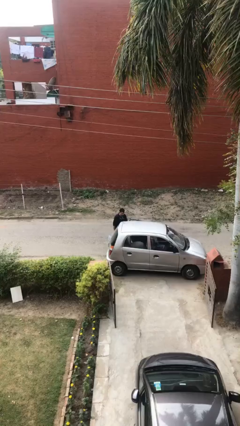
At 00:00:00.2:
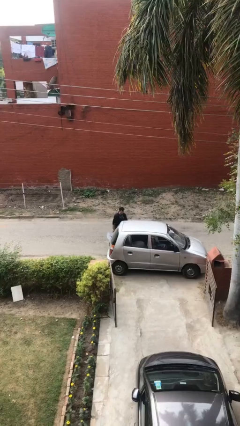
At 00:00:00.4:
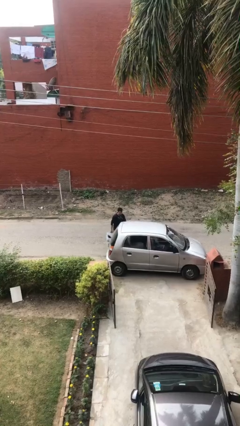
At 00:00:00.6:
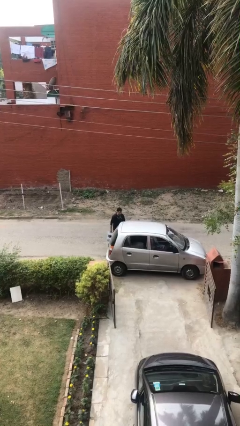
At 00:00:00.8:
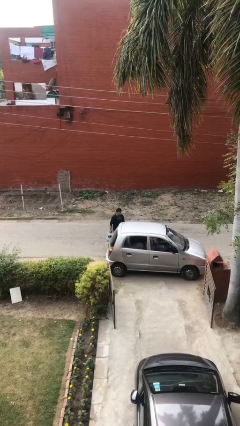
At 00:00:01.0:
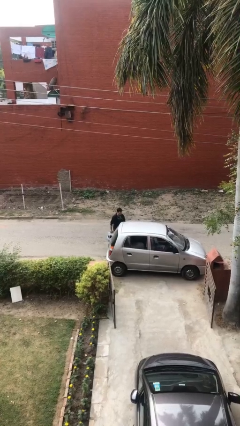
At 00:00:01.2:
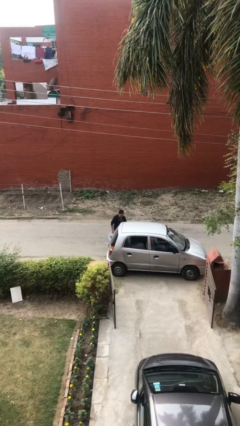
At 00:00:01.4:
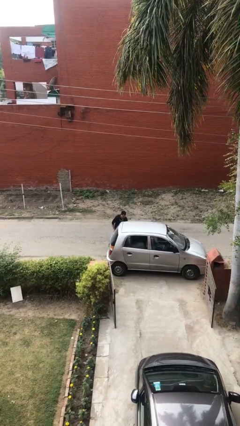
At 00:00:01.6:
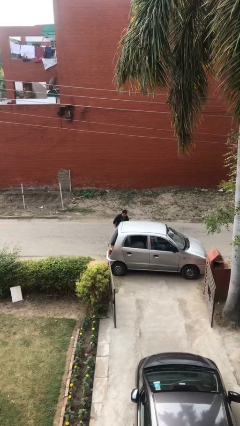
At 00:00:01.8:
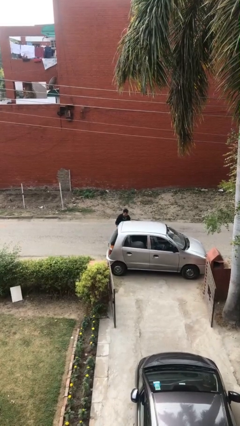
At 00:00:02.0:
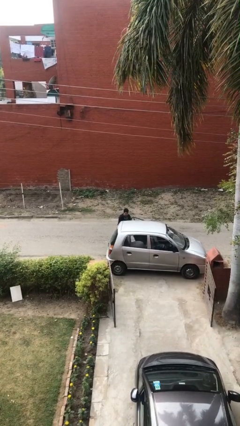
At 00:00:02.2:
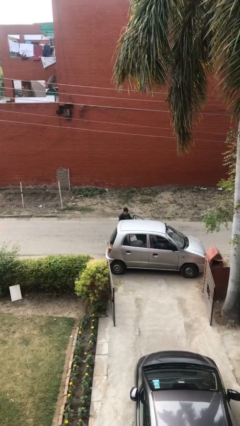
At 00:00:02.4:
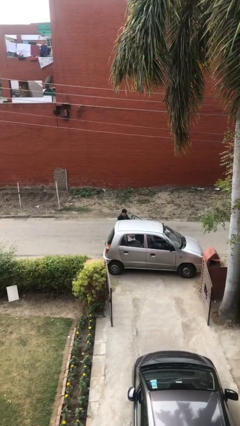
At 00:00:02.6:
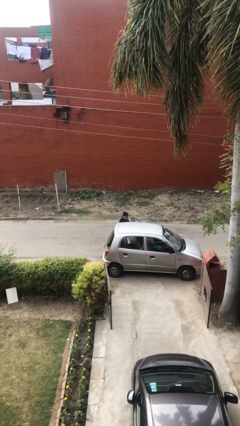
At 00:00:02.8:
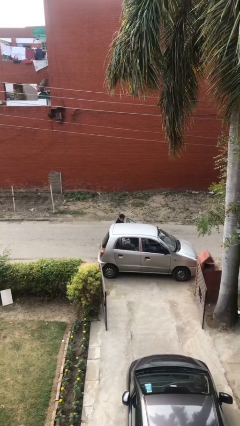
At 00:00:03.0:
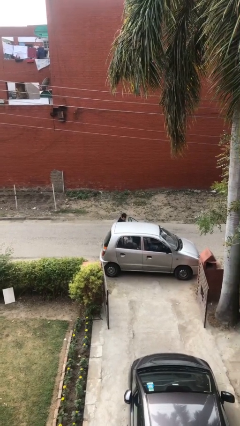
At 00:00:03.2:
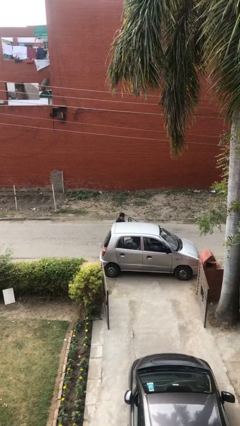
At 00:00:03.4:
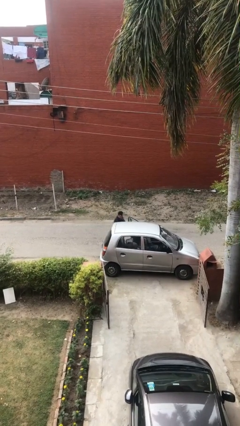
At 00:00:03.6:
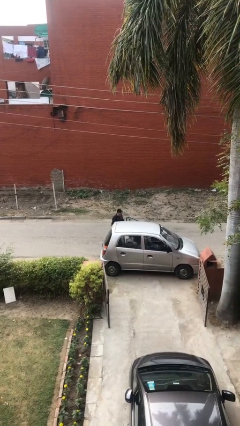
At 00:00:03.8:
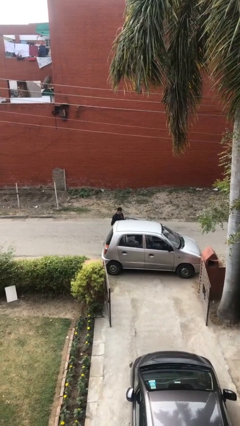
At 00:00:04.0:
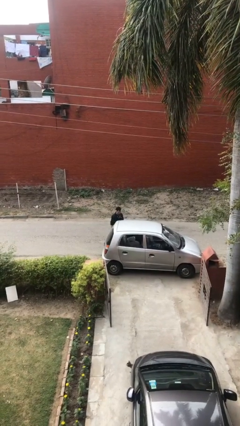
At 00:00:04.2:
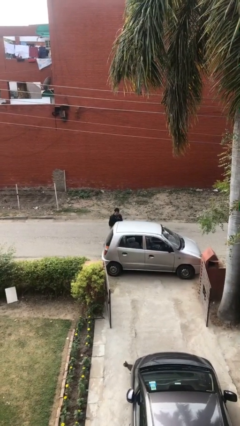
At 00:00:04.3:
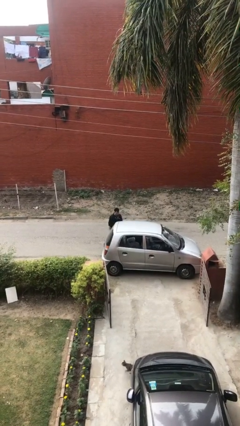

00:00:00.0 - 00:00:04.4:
person loads car

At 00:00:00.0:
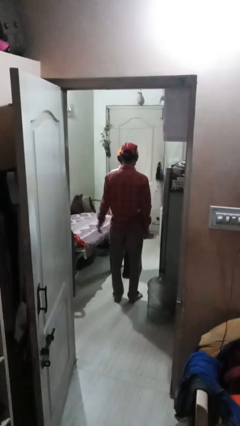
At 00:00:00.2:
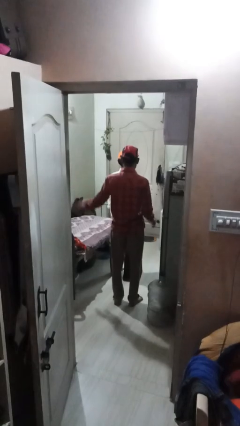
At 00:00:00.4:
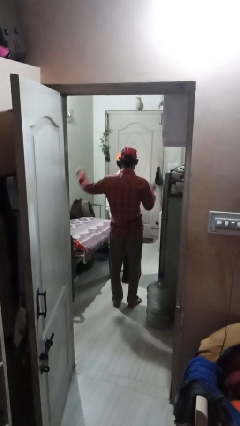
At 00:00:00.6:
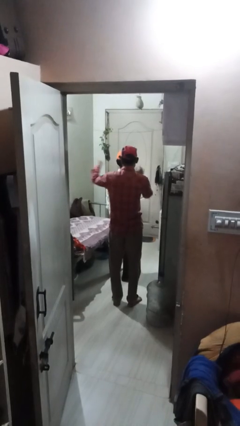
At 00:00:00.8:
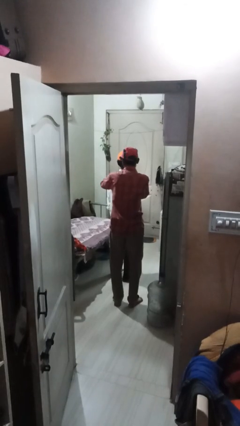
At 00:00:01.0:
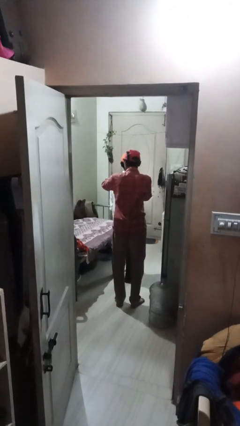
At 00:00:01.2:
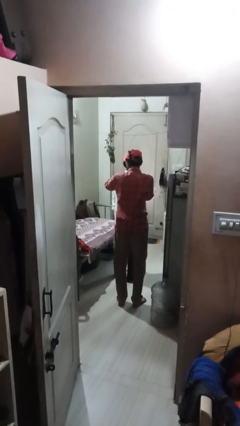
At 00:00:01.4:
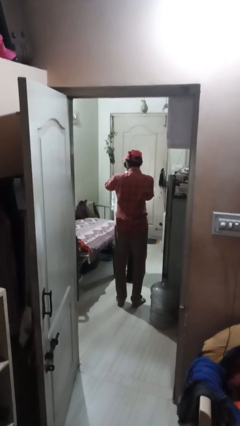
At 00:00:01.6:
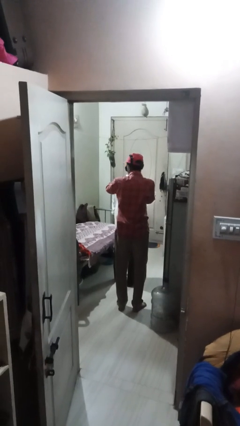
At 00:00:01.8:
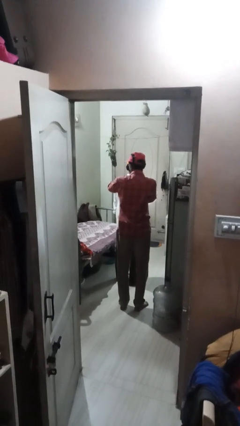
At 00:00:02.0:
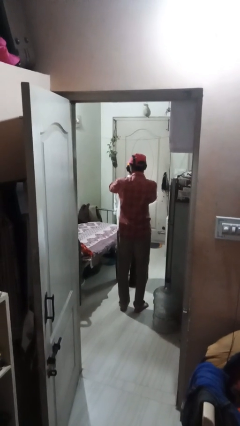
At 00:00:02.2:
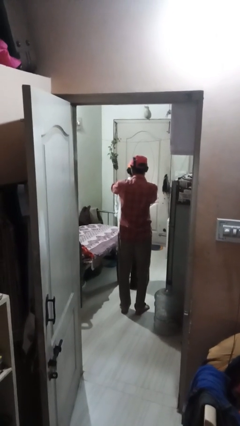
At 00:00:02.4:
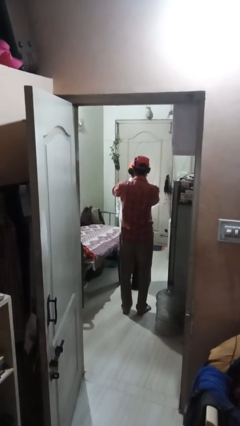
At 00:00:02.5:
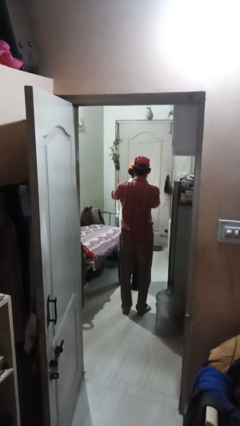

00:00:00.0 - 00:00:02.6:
person touches back of person

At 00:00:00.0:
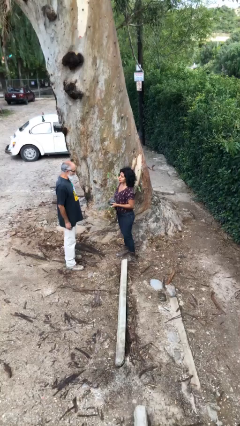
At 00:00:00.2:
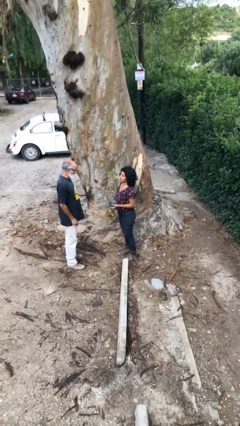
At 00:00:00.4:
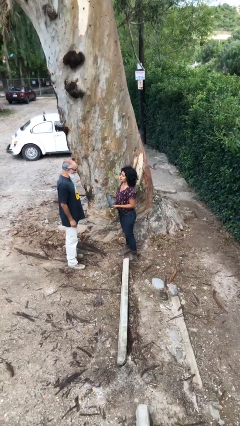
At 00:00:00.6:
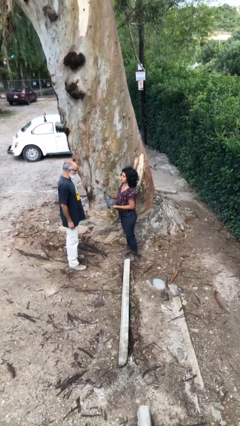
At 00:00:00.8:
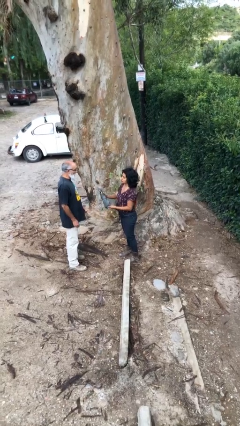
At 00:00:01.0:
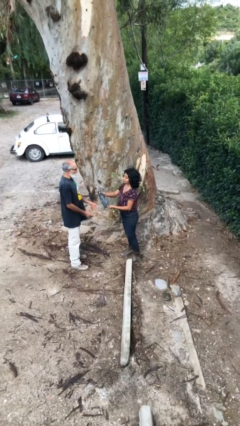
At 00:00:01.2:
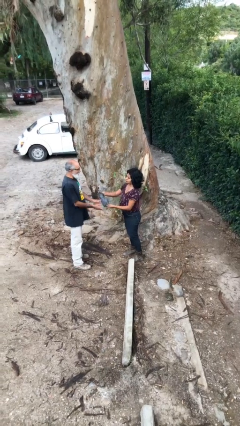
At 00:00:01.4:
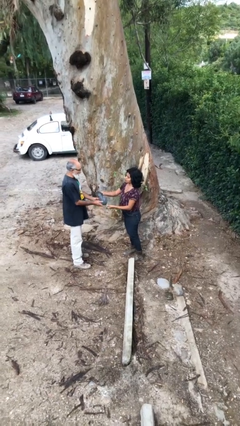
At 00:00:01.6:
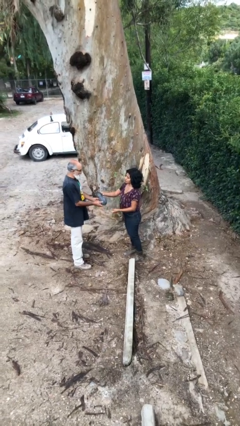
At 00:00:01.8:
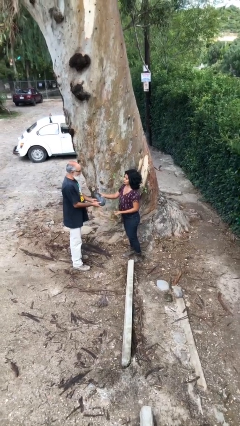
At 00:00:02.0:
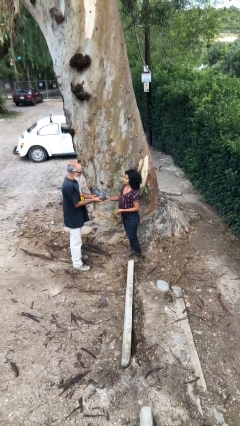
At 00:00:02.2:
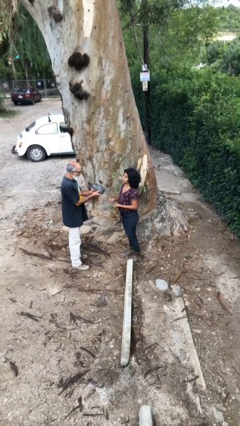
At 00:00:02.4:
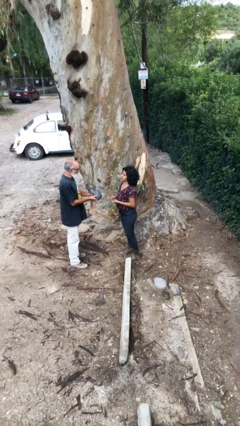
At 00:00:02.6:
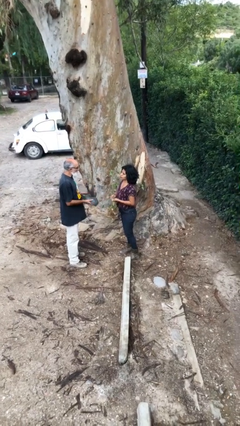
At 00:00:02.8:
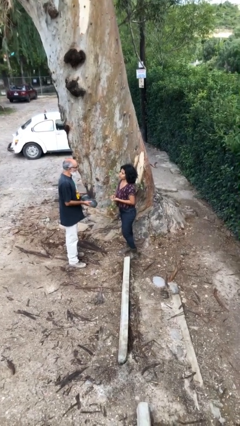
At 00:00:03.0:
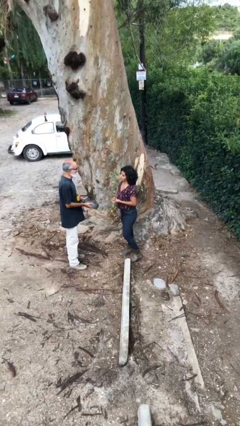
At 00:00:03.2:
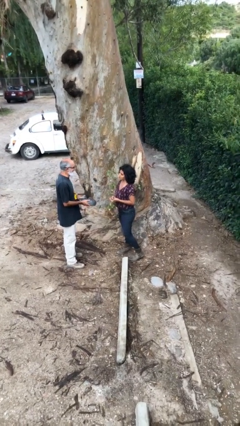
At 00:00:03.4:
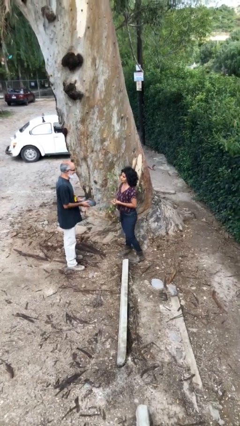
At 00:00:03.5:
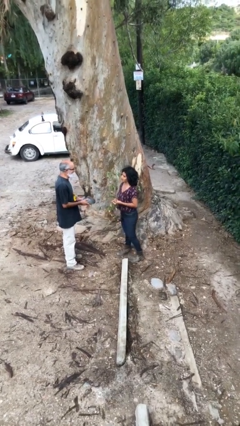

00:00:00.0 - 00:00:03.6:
person transfers object to person

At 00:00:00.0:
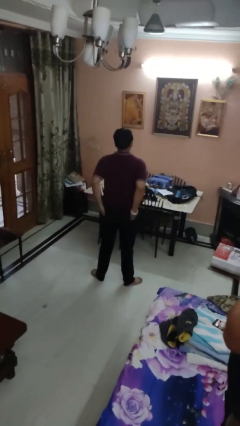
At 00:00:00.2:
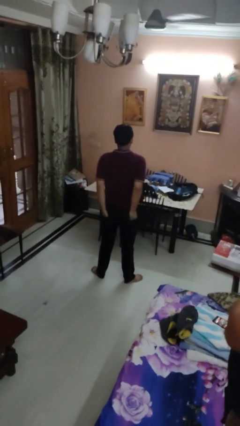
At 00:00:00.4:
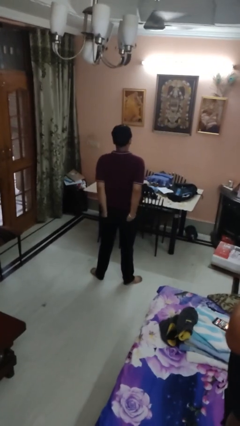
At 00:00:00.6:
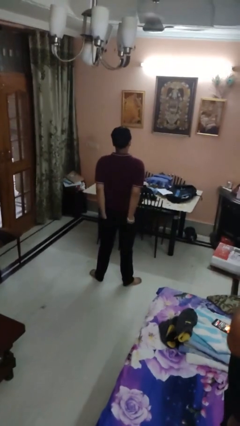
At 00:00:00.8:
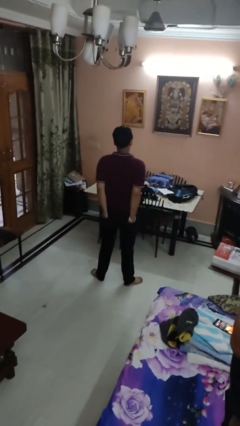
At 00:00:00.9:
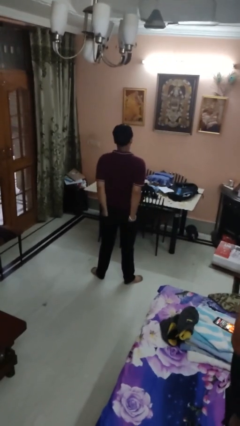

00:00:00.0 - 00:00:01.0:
person puts hands in back pockets

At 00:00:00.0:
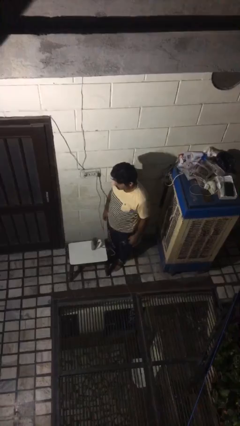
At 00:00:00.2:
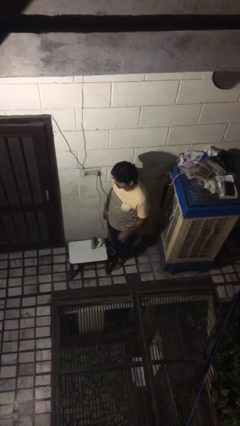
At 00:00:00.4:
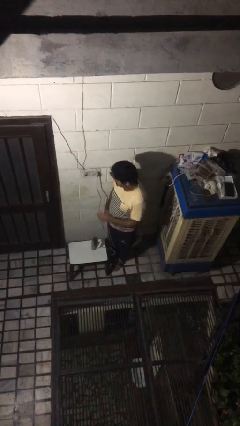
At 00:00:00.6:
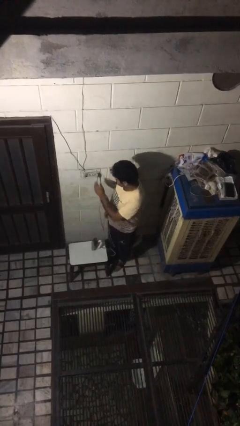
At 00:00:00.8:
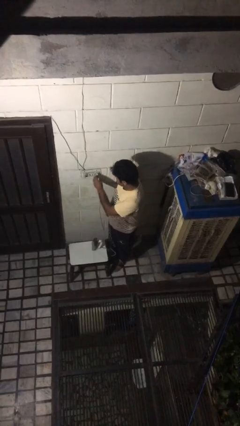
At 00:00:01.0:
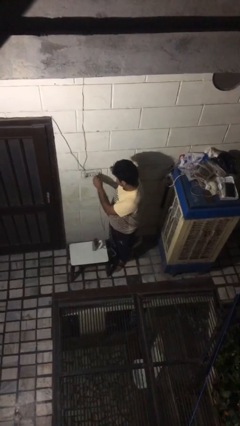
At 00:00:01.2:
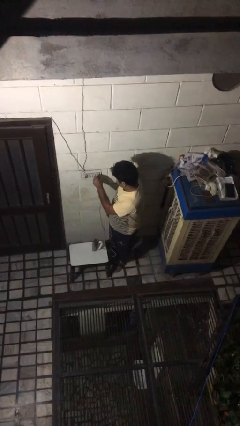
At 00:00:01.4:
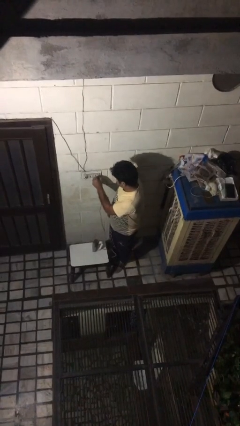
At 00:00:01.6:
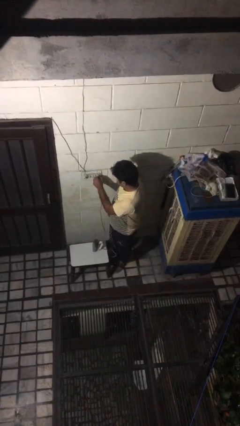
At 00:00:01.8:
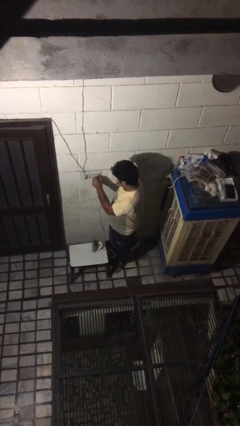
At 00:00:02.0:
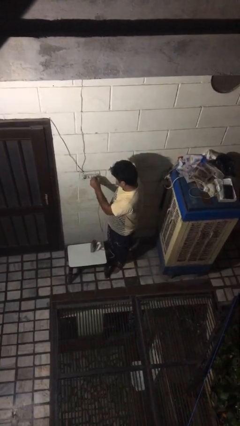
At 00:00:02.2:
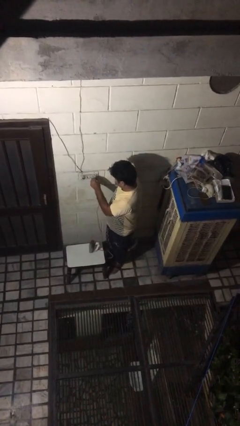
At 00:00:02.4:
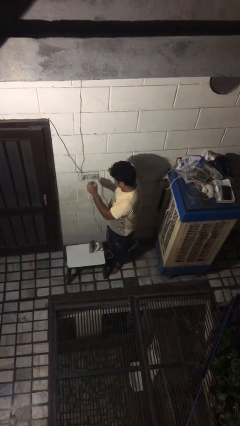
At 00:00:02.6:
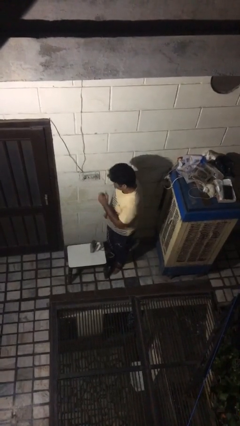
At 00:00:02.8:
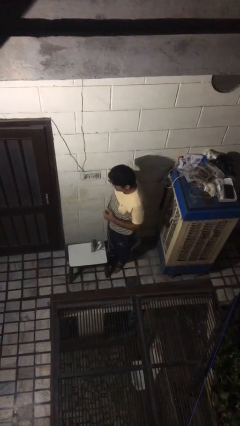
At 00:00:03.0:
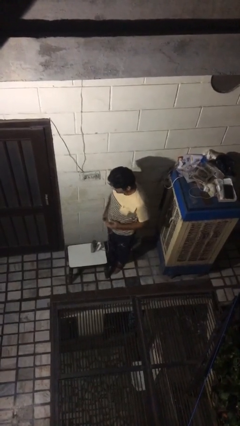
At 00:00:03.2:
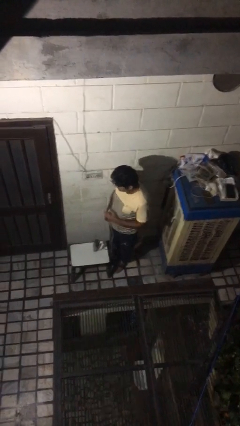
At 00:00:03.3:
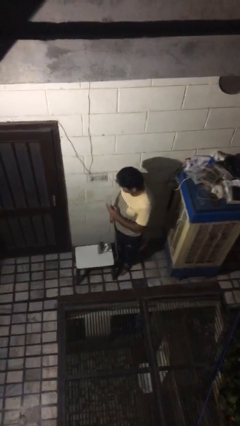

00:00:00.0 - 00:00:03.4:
person unplugs from electrical socket

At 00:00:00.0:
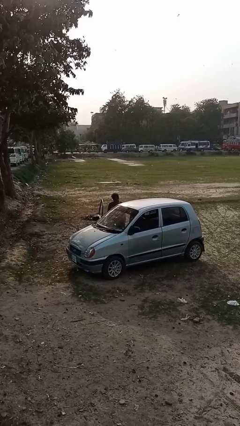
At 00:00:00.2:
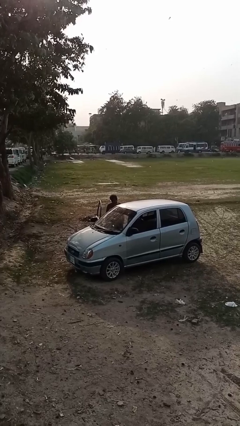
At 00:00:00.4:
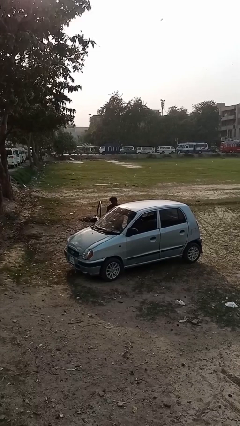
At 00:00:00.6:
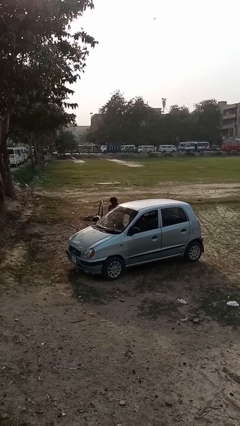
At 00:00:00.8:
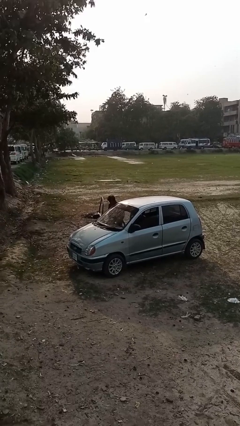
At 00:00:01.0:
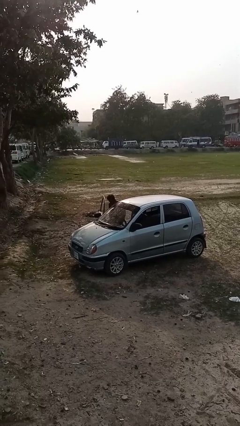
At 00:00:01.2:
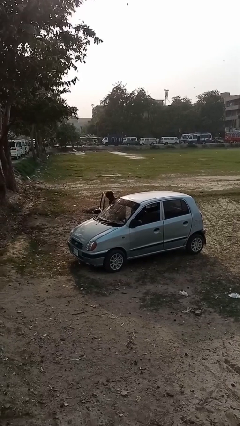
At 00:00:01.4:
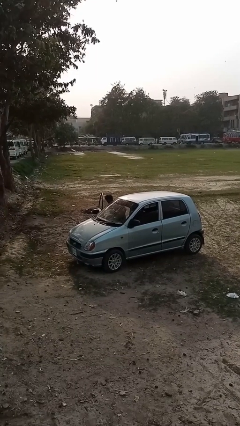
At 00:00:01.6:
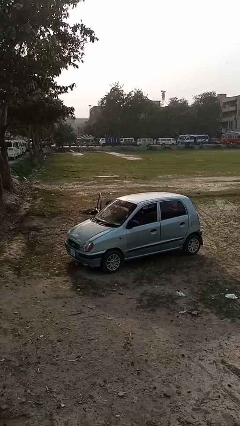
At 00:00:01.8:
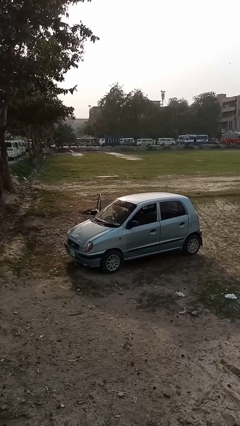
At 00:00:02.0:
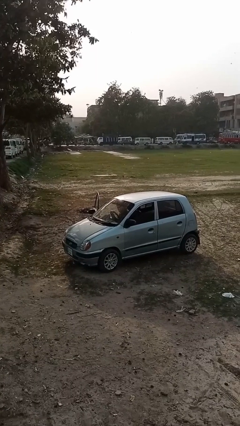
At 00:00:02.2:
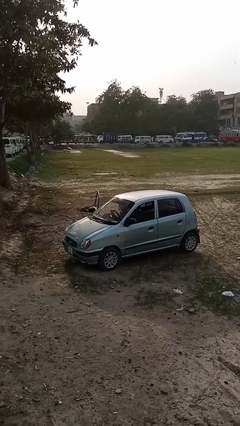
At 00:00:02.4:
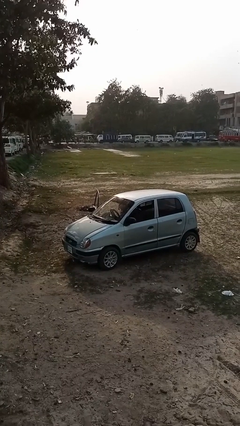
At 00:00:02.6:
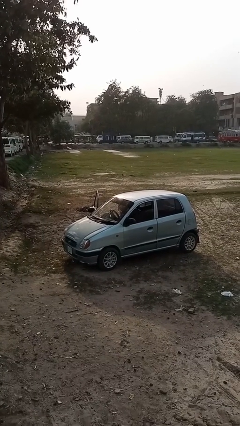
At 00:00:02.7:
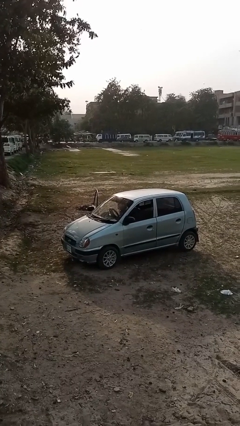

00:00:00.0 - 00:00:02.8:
person enters car
